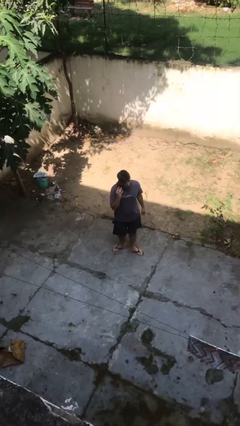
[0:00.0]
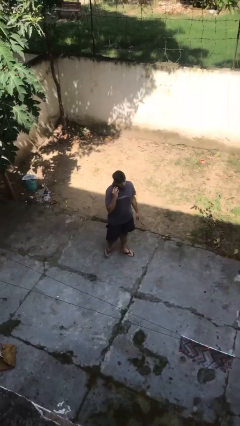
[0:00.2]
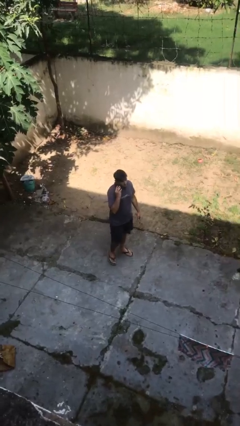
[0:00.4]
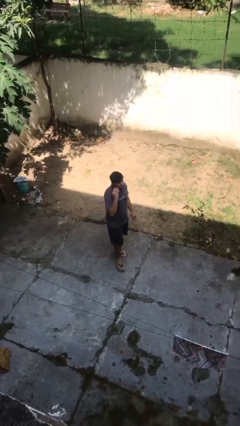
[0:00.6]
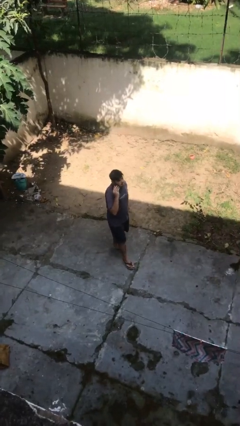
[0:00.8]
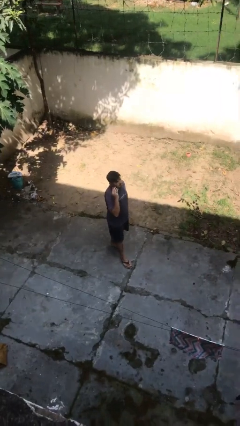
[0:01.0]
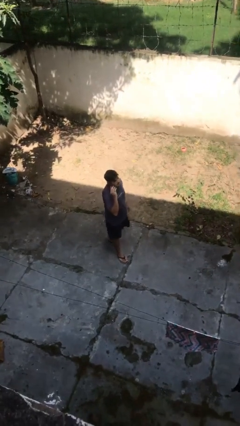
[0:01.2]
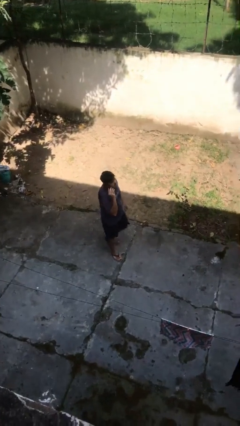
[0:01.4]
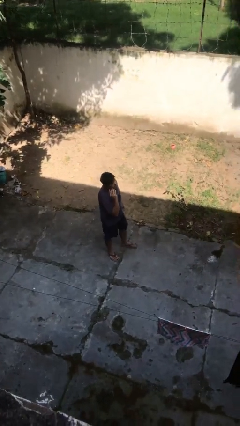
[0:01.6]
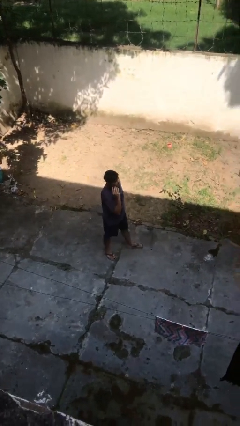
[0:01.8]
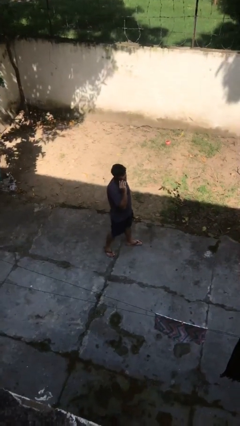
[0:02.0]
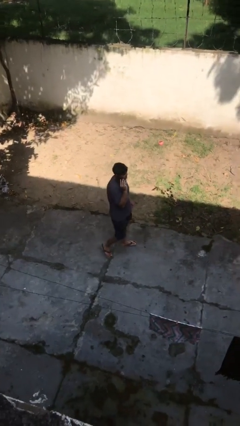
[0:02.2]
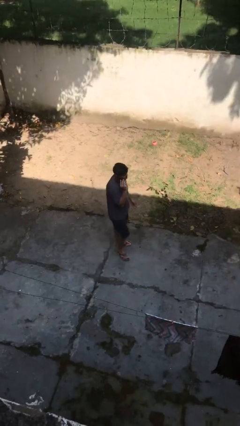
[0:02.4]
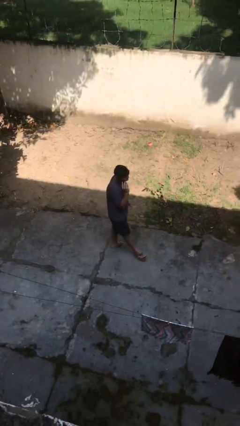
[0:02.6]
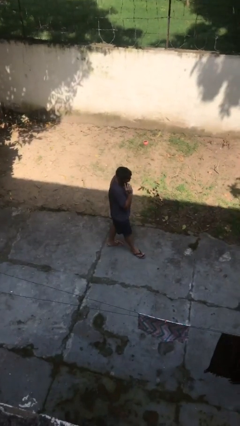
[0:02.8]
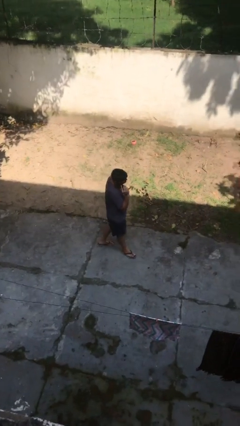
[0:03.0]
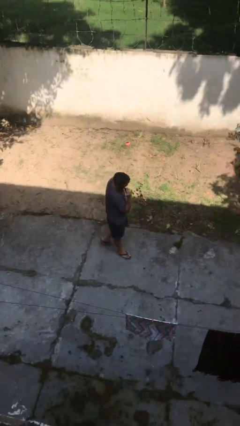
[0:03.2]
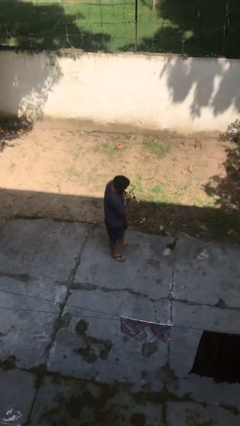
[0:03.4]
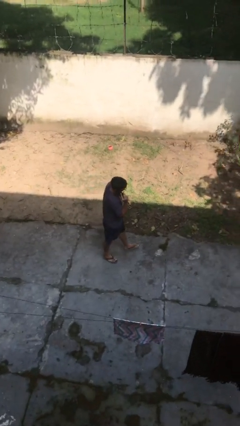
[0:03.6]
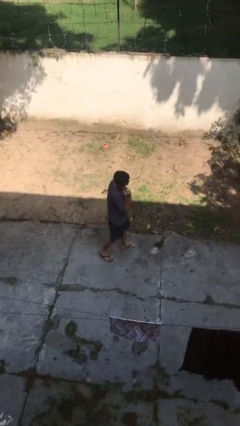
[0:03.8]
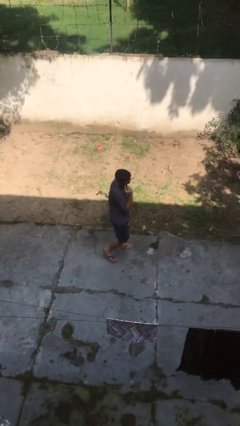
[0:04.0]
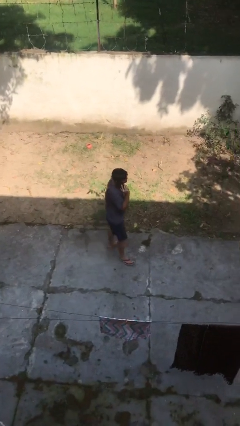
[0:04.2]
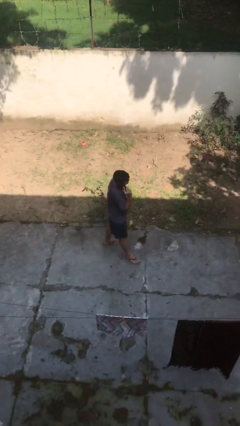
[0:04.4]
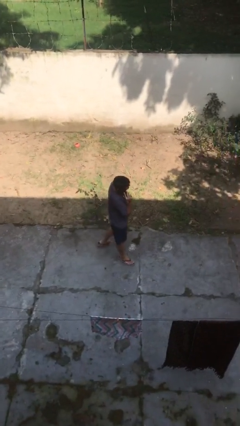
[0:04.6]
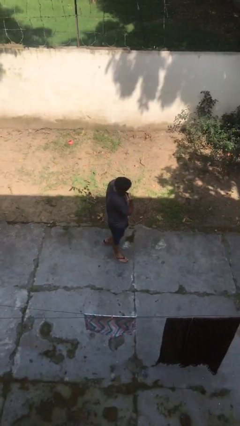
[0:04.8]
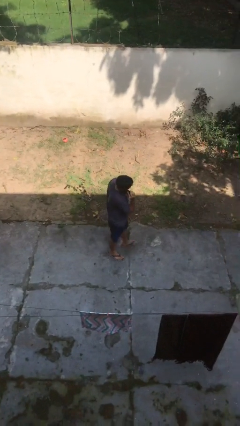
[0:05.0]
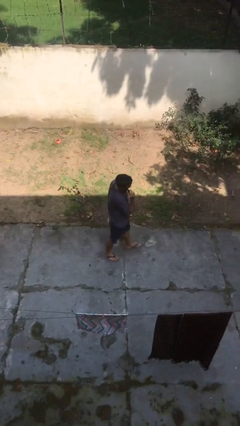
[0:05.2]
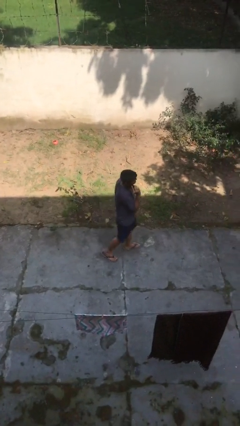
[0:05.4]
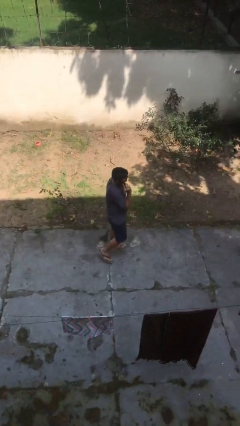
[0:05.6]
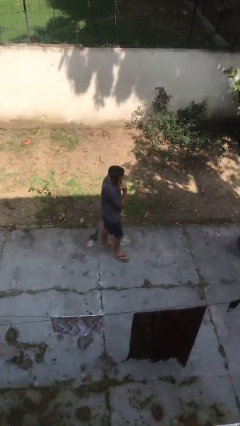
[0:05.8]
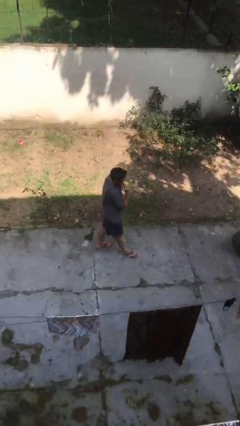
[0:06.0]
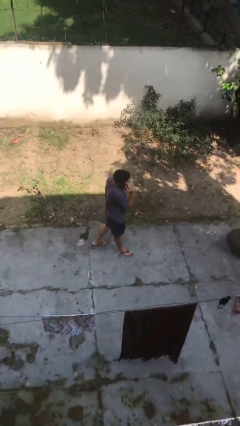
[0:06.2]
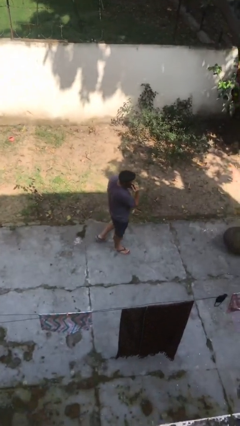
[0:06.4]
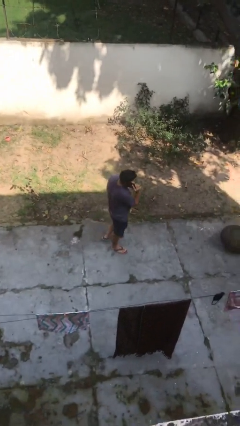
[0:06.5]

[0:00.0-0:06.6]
person talks on phone

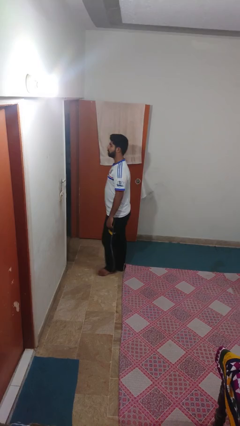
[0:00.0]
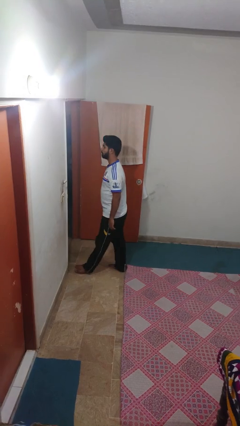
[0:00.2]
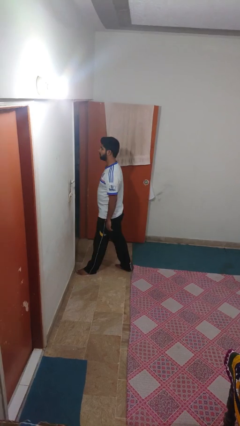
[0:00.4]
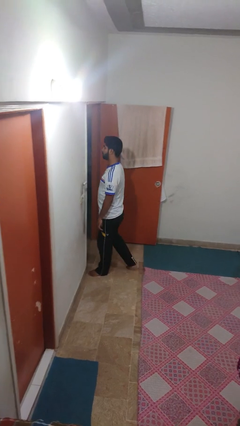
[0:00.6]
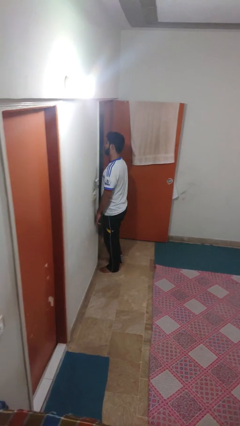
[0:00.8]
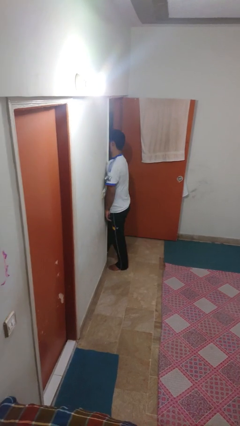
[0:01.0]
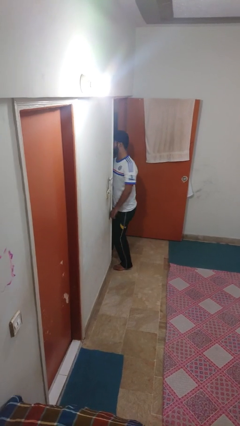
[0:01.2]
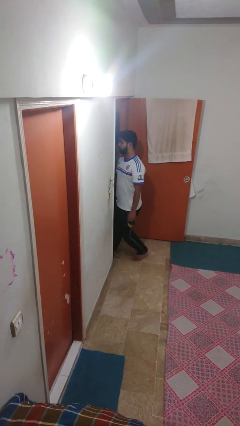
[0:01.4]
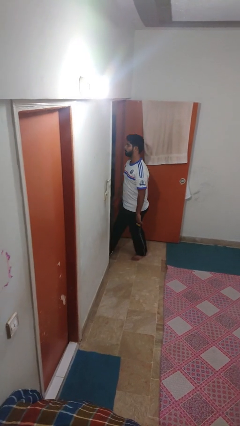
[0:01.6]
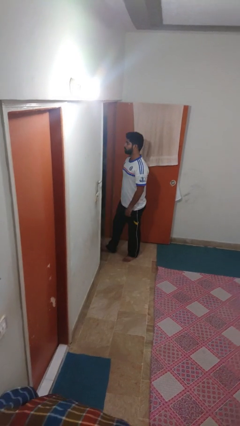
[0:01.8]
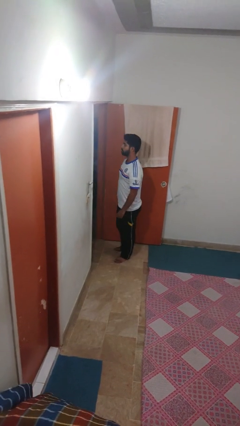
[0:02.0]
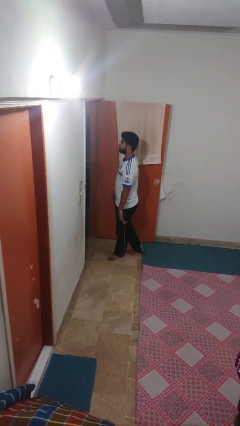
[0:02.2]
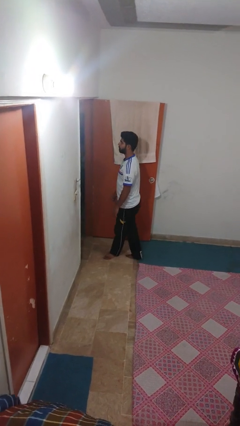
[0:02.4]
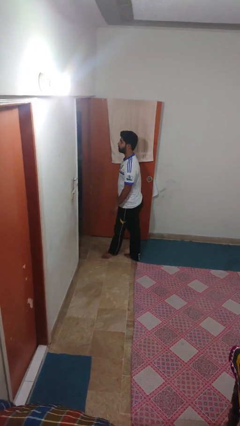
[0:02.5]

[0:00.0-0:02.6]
person bumps into wall

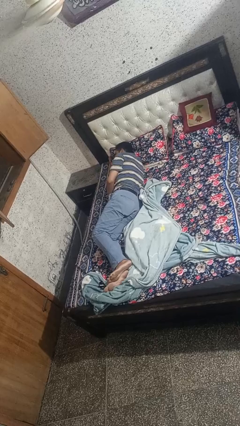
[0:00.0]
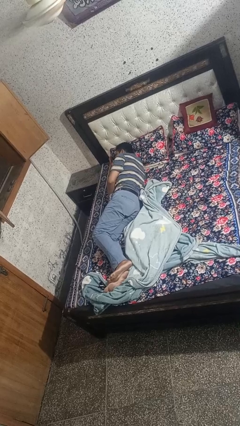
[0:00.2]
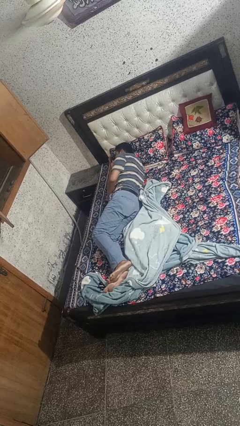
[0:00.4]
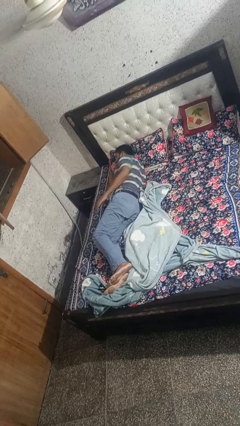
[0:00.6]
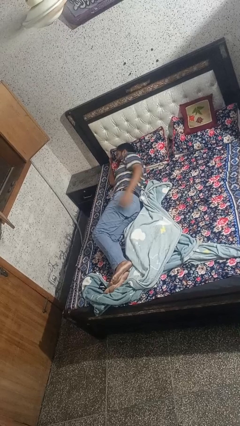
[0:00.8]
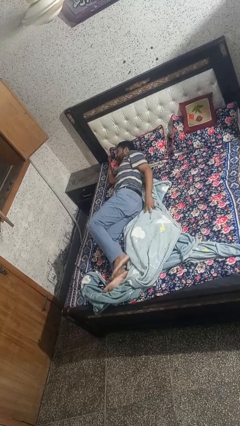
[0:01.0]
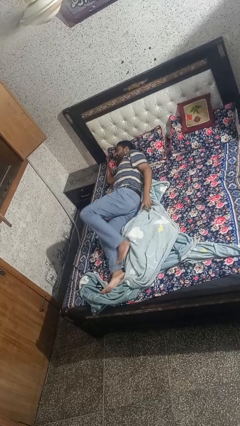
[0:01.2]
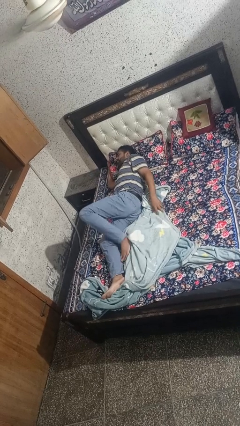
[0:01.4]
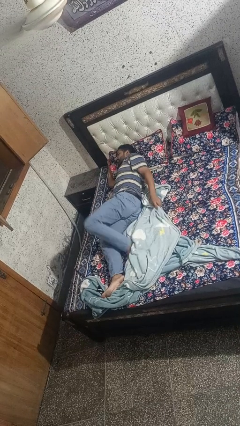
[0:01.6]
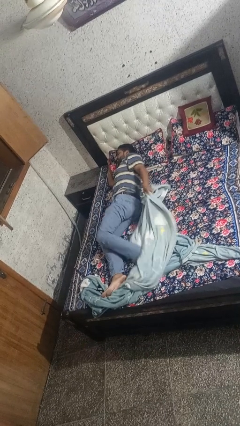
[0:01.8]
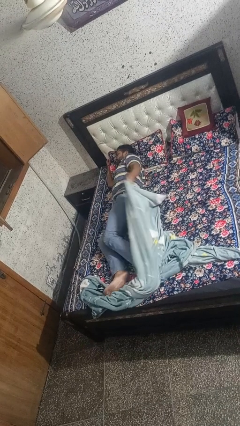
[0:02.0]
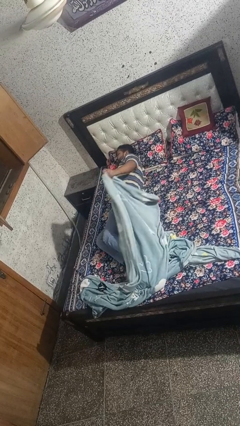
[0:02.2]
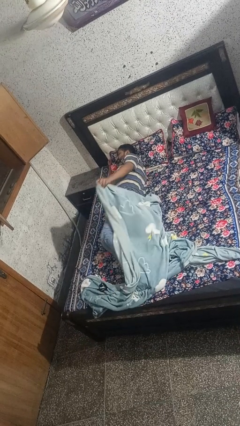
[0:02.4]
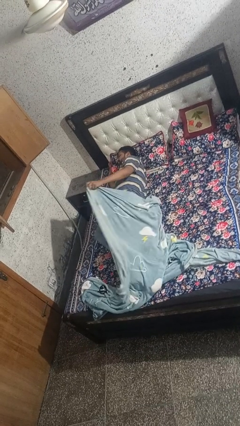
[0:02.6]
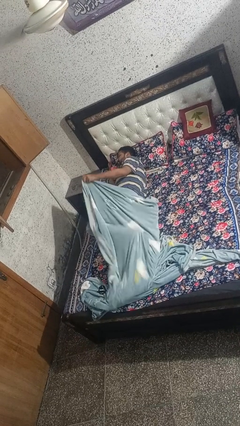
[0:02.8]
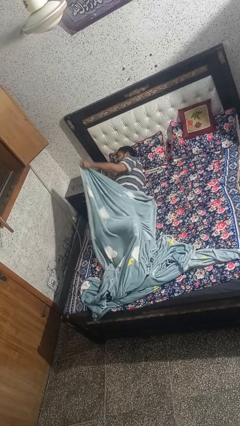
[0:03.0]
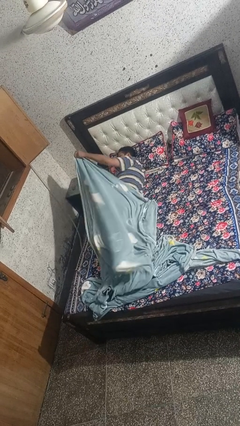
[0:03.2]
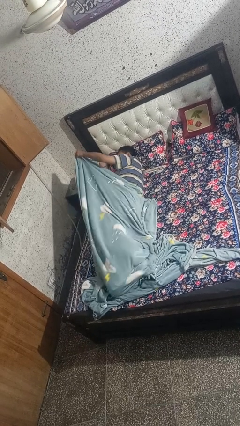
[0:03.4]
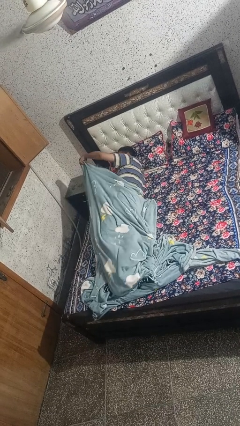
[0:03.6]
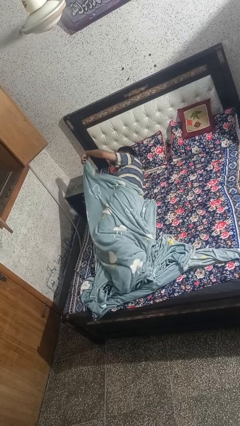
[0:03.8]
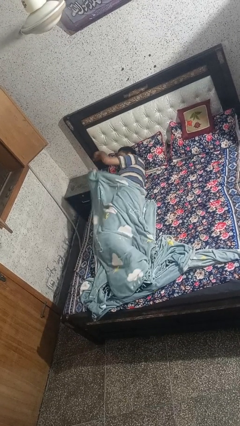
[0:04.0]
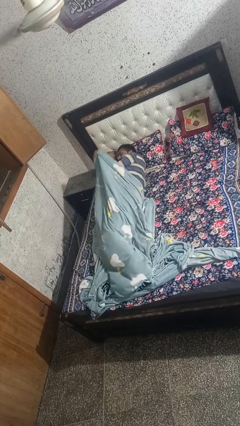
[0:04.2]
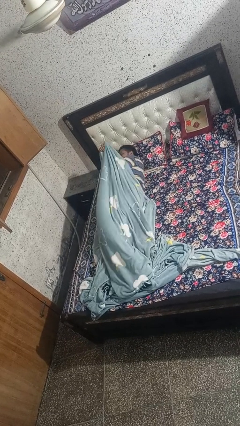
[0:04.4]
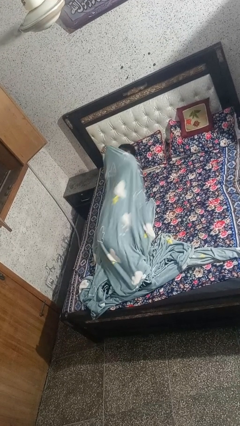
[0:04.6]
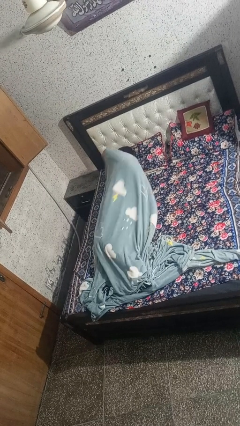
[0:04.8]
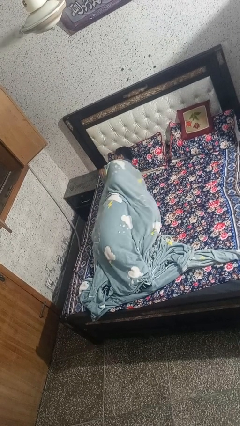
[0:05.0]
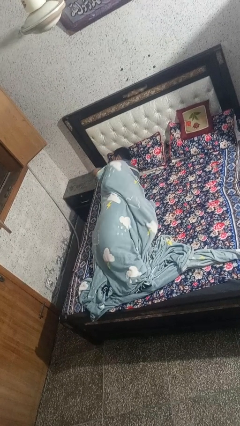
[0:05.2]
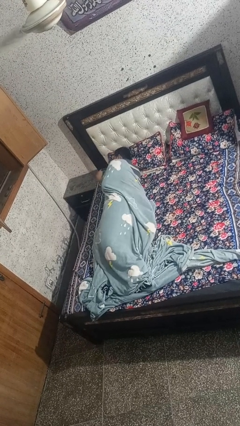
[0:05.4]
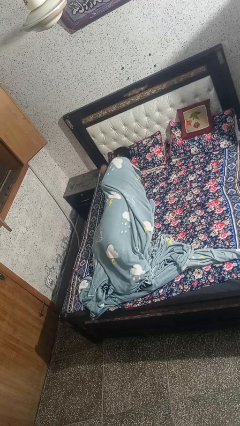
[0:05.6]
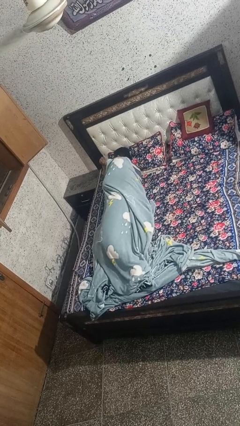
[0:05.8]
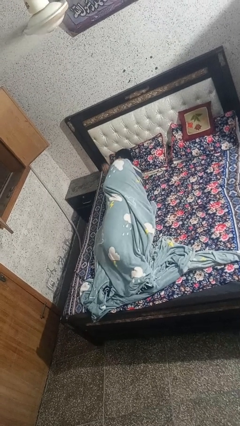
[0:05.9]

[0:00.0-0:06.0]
person covers with bedsheets

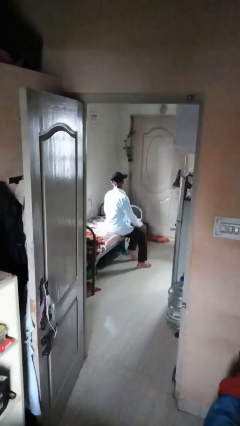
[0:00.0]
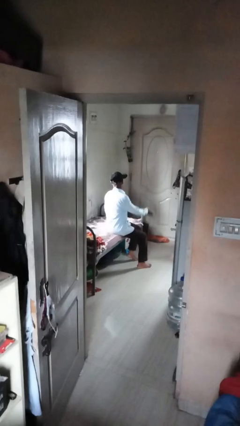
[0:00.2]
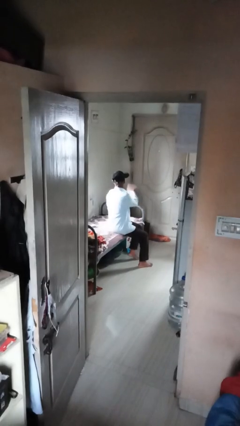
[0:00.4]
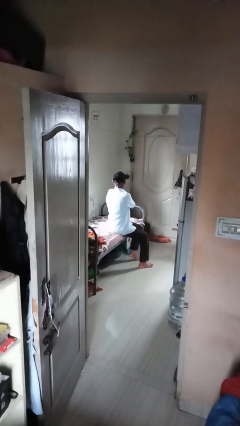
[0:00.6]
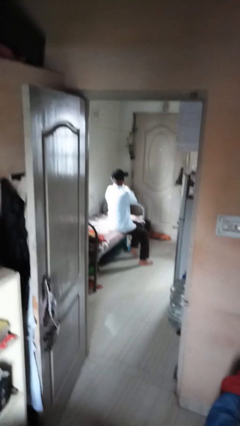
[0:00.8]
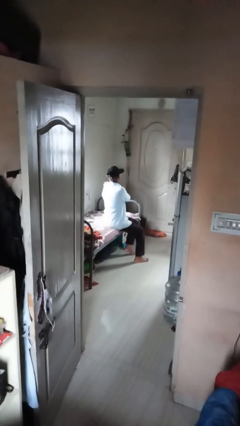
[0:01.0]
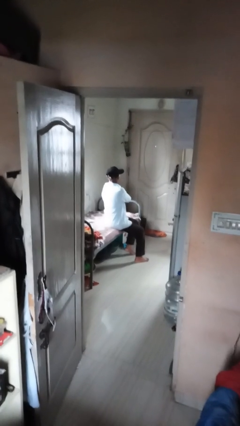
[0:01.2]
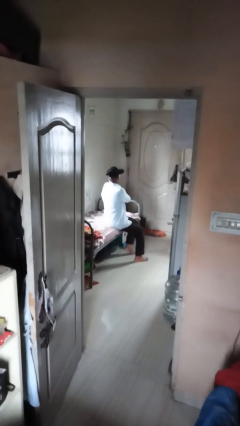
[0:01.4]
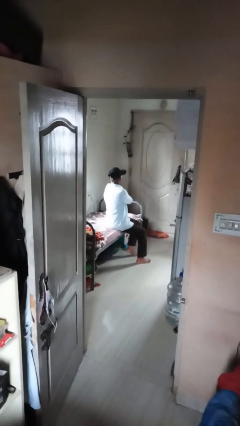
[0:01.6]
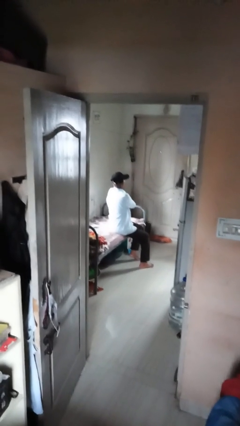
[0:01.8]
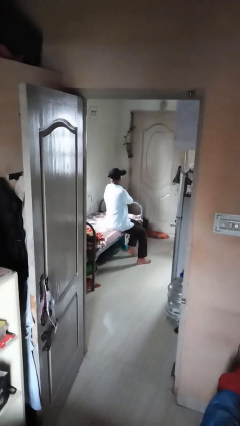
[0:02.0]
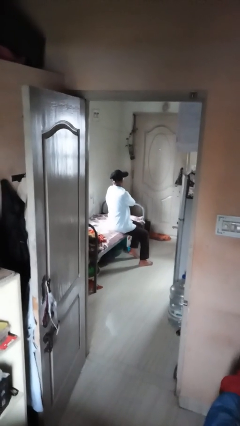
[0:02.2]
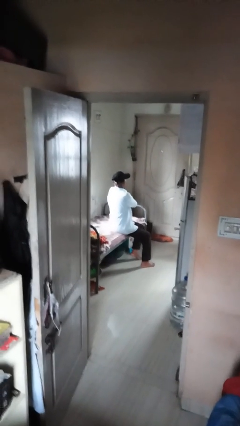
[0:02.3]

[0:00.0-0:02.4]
person swats bug
